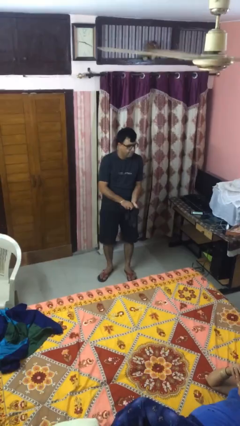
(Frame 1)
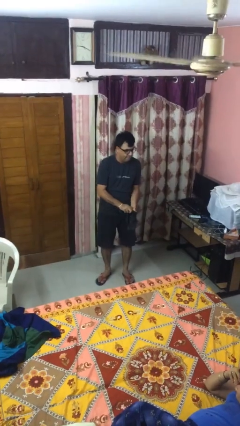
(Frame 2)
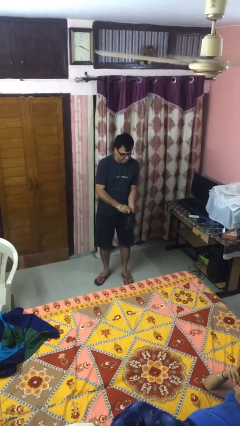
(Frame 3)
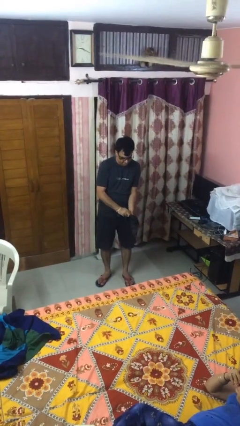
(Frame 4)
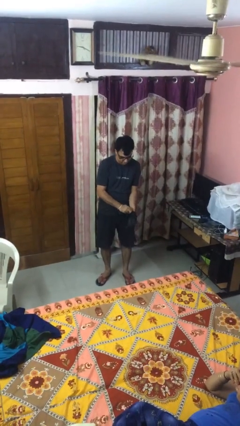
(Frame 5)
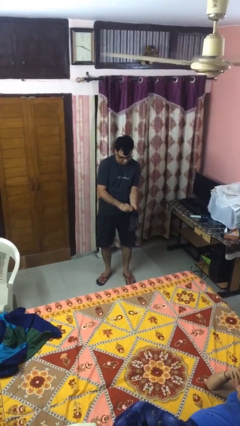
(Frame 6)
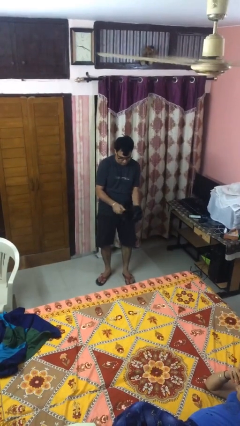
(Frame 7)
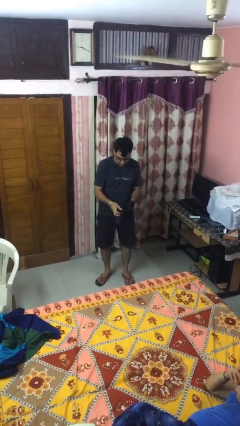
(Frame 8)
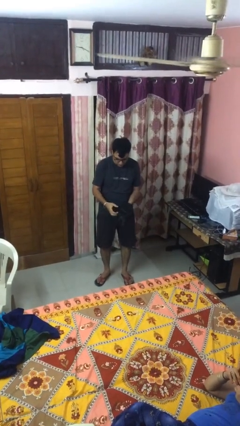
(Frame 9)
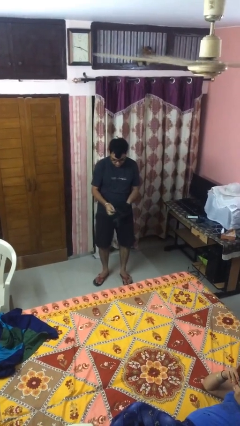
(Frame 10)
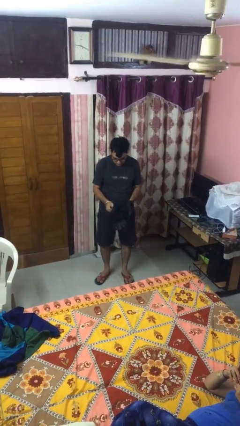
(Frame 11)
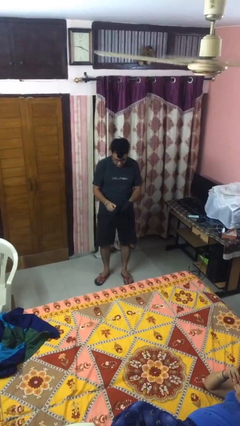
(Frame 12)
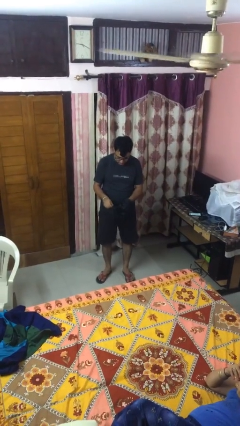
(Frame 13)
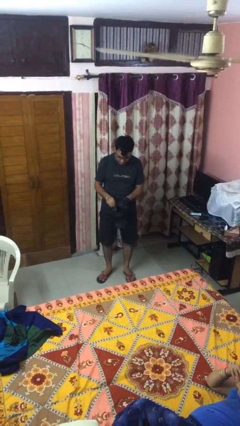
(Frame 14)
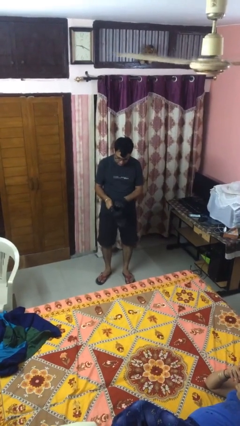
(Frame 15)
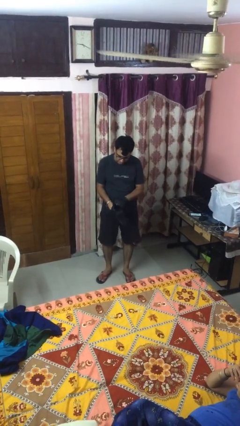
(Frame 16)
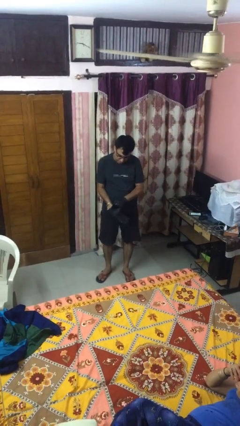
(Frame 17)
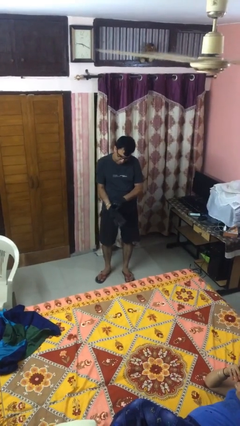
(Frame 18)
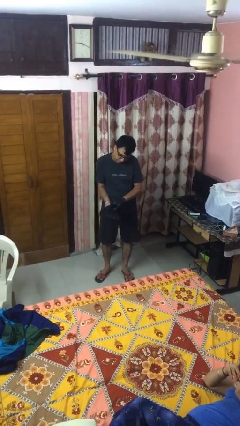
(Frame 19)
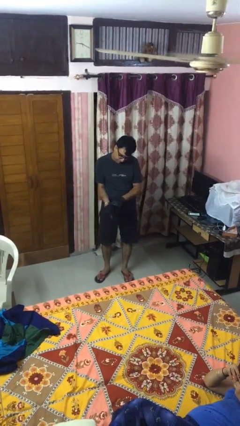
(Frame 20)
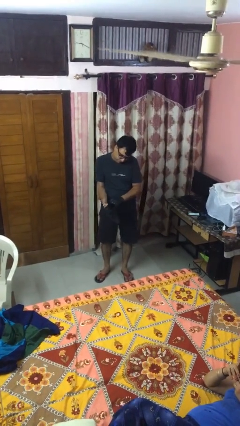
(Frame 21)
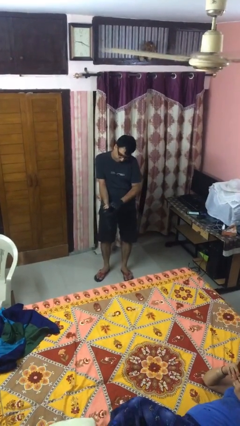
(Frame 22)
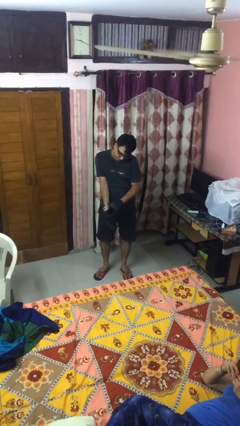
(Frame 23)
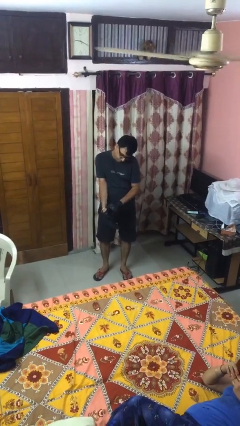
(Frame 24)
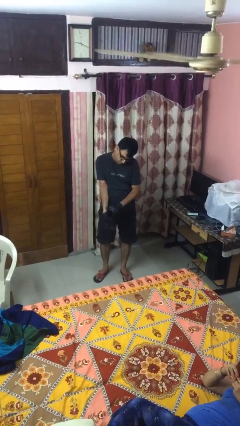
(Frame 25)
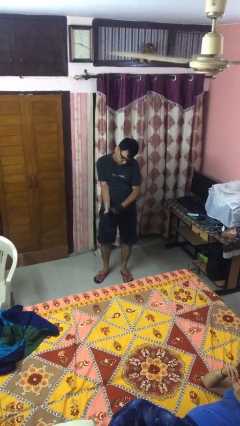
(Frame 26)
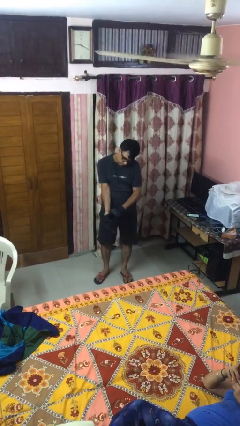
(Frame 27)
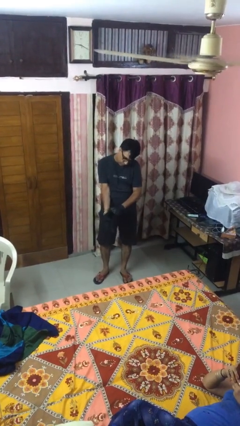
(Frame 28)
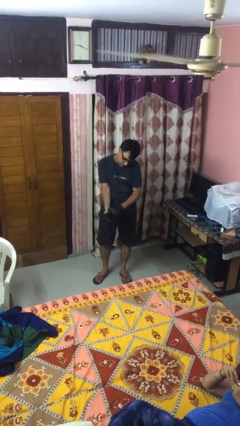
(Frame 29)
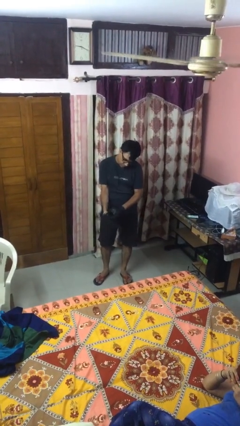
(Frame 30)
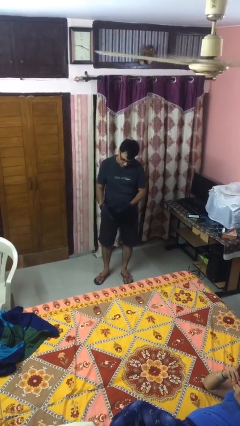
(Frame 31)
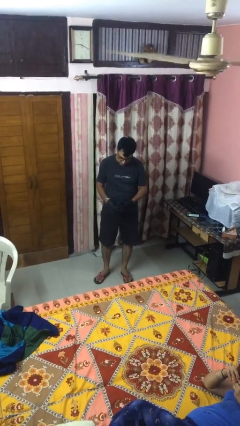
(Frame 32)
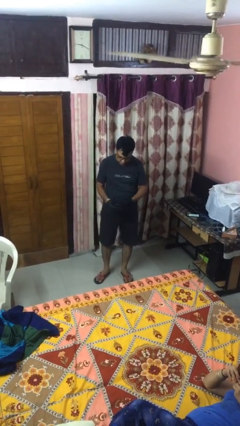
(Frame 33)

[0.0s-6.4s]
person puts on gloves

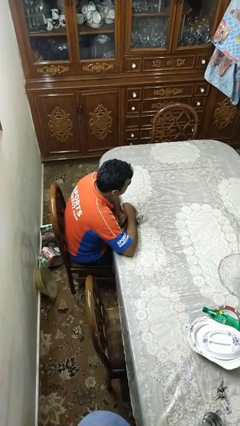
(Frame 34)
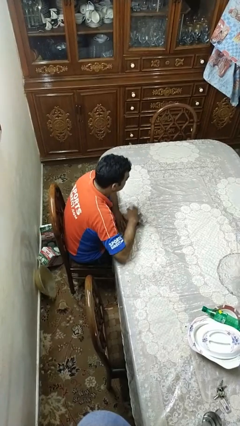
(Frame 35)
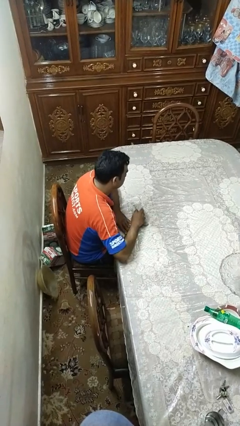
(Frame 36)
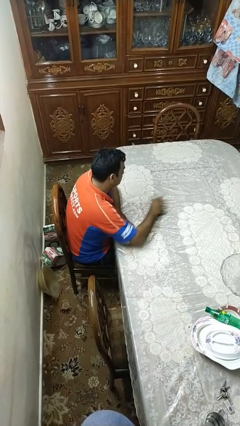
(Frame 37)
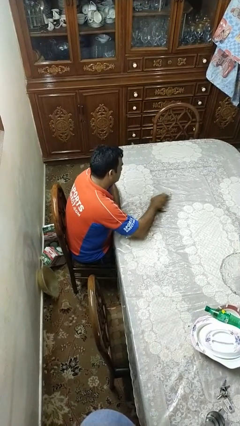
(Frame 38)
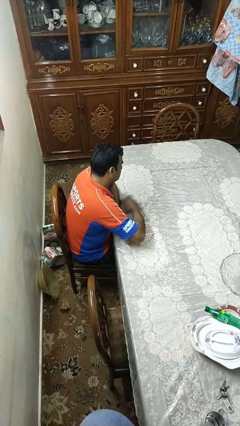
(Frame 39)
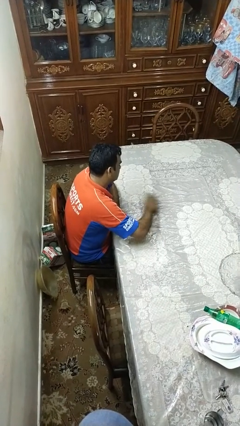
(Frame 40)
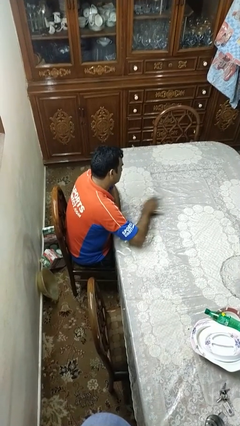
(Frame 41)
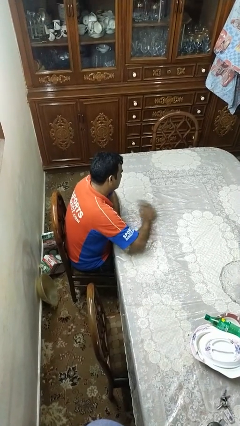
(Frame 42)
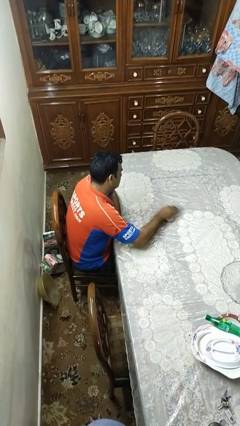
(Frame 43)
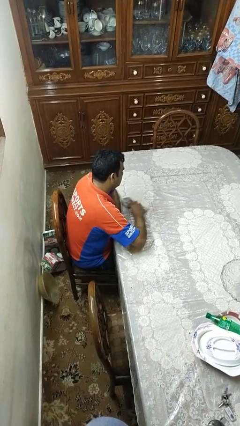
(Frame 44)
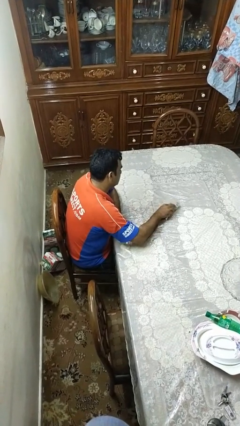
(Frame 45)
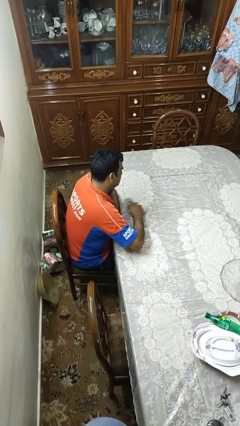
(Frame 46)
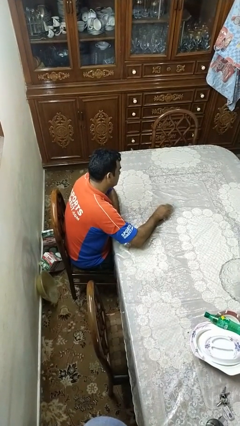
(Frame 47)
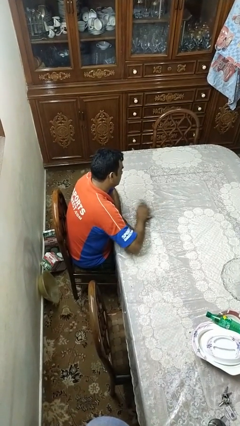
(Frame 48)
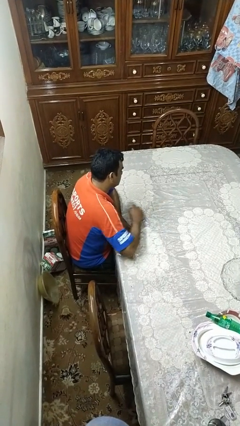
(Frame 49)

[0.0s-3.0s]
person cleans table with rag

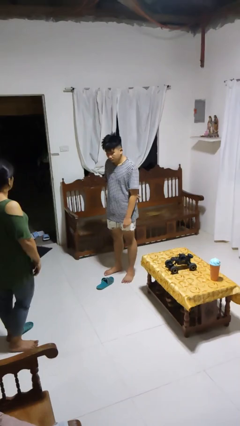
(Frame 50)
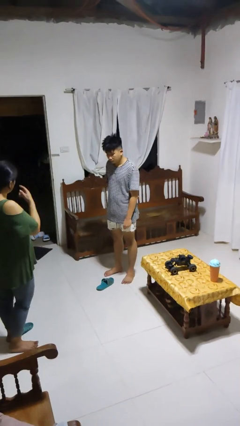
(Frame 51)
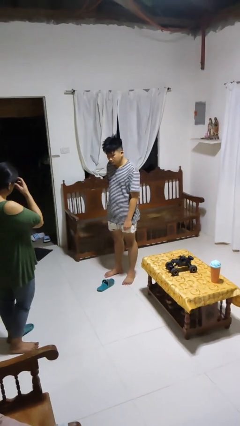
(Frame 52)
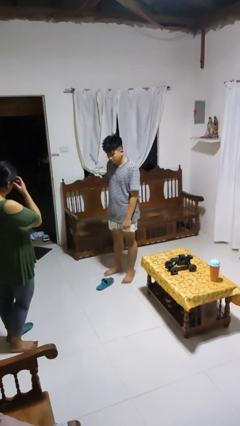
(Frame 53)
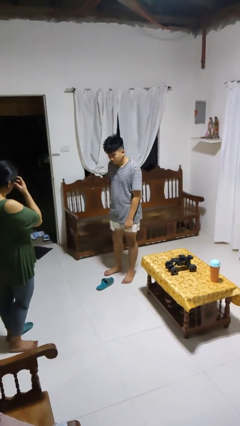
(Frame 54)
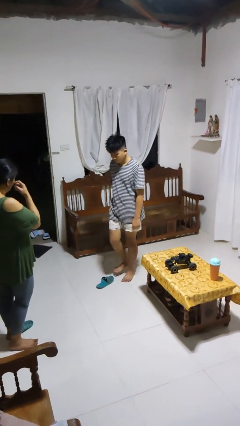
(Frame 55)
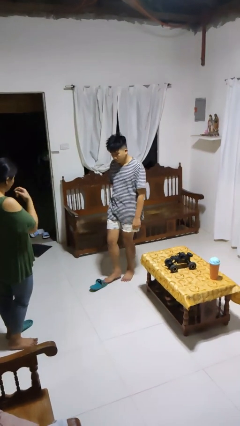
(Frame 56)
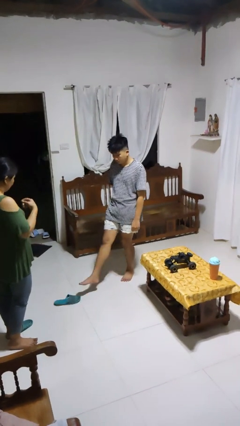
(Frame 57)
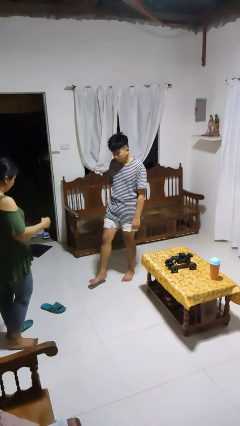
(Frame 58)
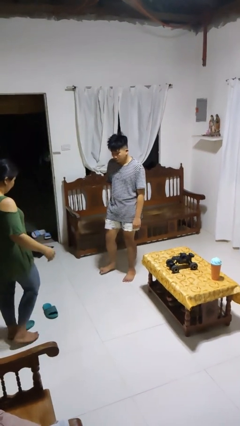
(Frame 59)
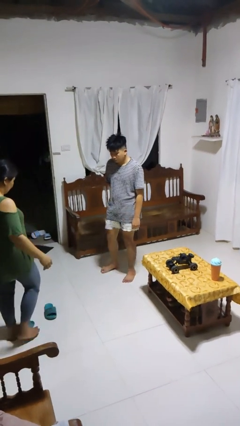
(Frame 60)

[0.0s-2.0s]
person kicks object to person

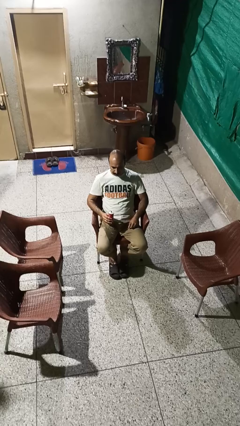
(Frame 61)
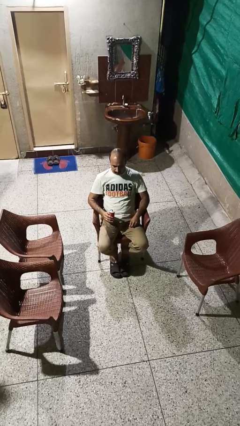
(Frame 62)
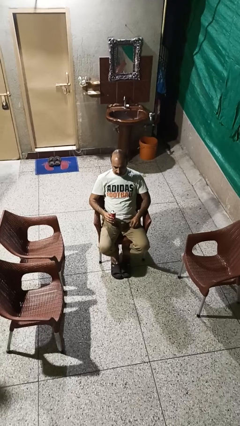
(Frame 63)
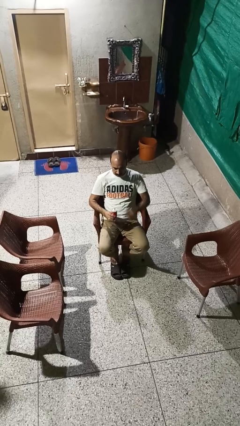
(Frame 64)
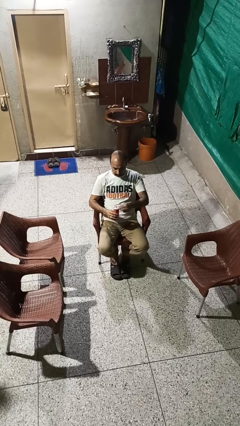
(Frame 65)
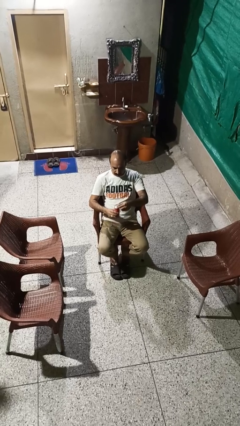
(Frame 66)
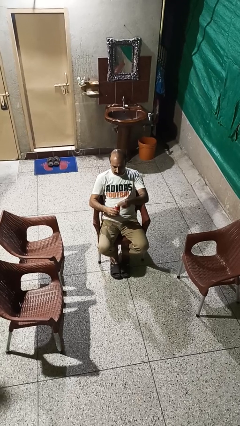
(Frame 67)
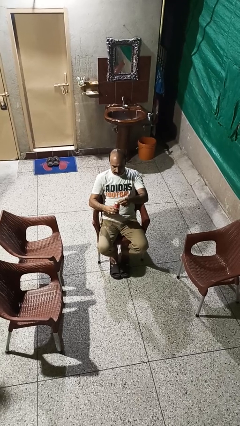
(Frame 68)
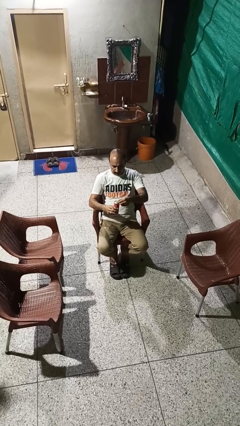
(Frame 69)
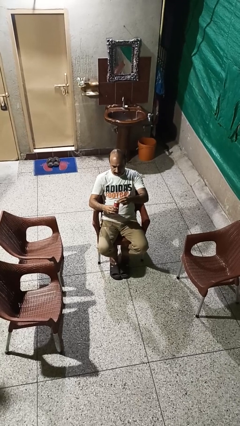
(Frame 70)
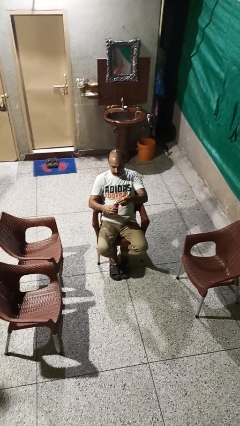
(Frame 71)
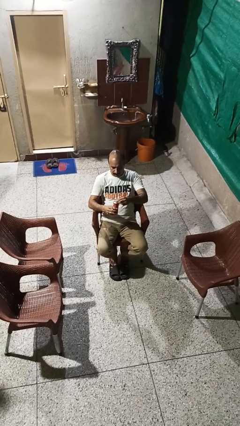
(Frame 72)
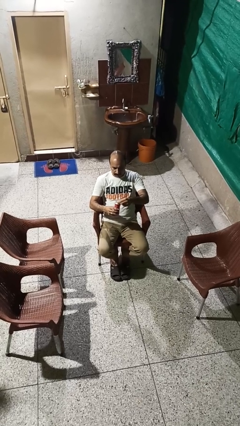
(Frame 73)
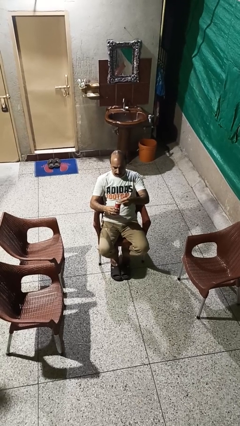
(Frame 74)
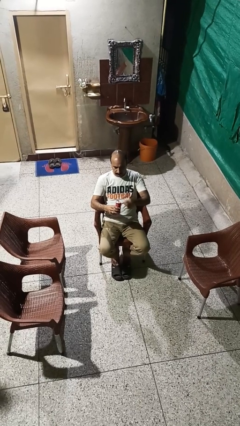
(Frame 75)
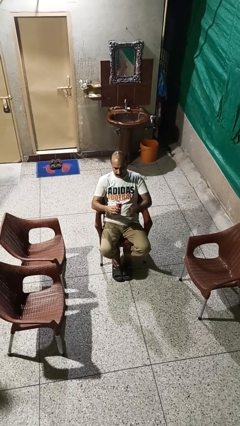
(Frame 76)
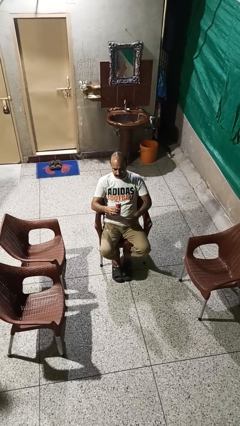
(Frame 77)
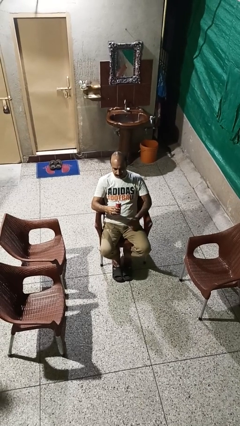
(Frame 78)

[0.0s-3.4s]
person opens beverage can

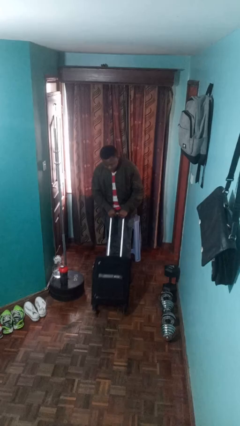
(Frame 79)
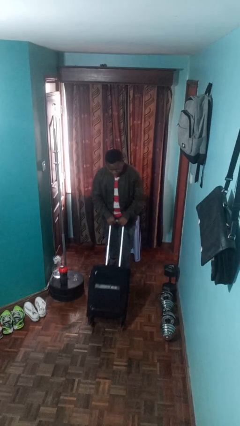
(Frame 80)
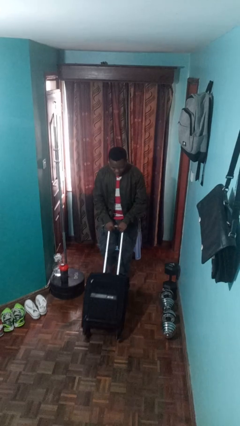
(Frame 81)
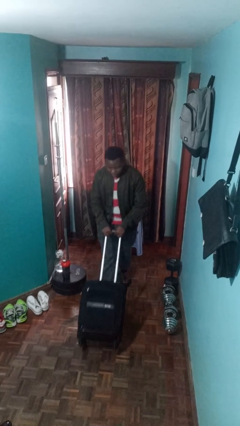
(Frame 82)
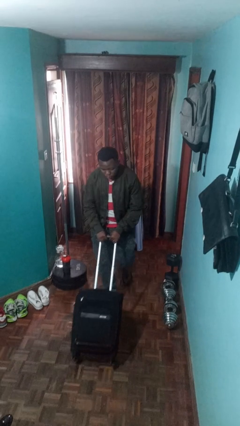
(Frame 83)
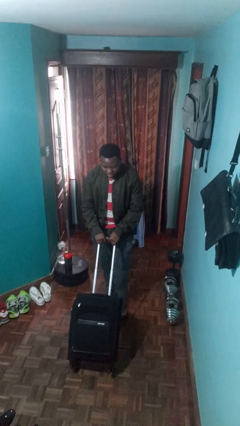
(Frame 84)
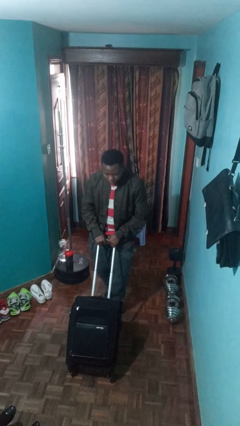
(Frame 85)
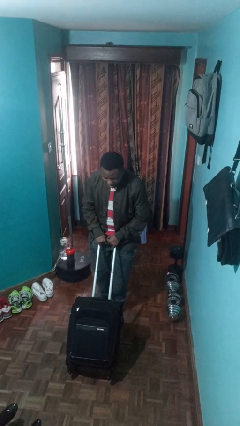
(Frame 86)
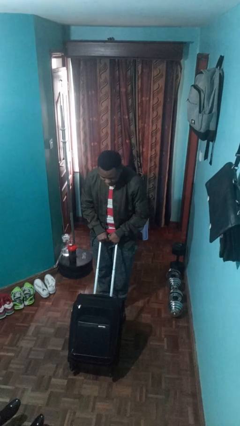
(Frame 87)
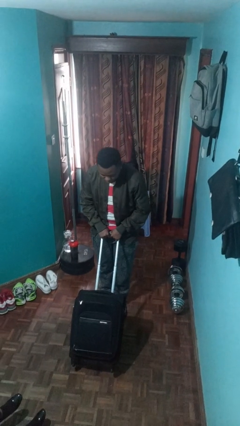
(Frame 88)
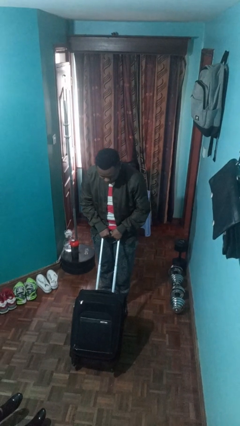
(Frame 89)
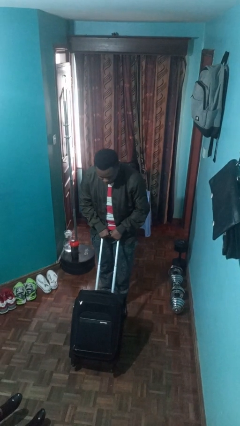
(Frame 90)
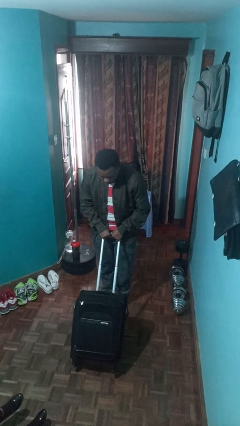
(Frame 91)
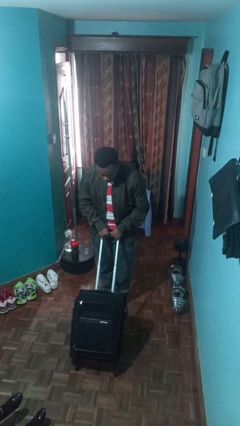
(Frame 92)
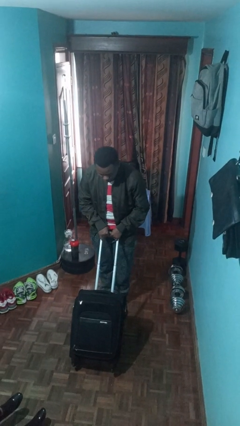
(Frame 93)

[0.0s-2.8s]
person pushes wheeled cart
